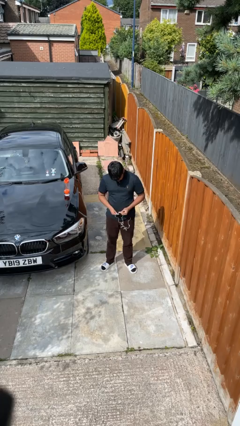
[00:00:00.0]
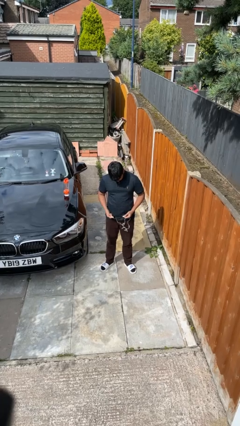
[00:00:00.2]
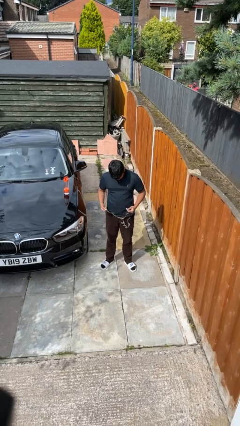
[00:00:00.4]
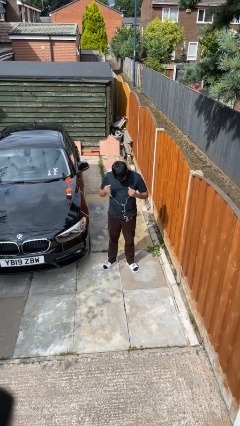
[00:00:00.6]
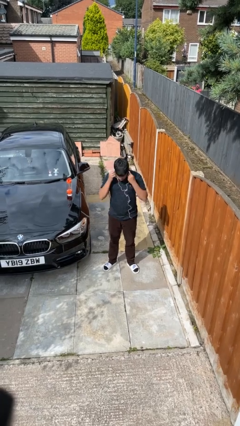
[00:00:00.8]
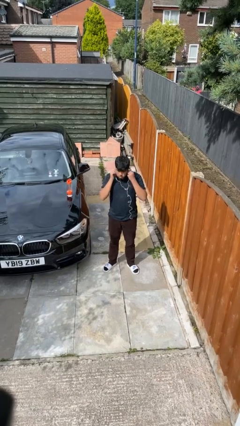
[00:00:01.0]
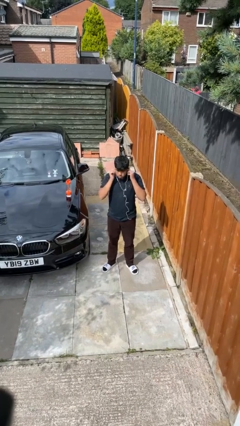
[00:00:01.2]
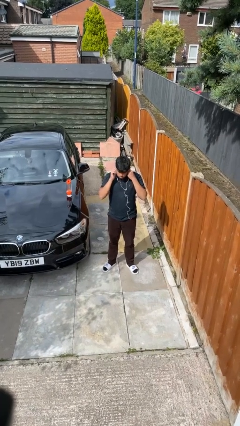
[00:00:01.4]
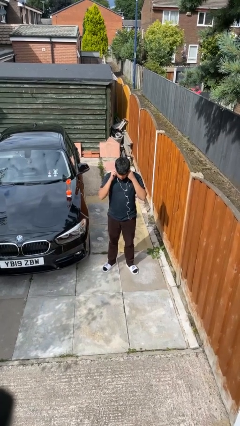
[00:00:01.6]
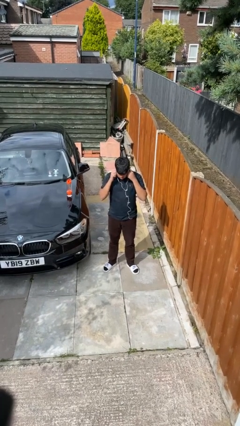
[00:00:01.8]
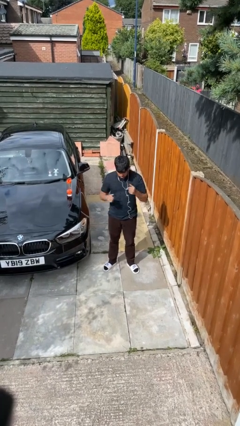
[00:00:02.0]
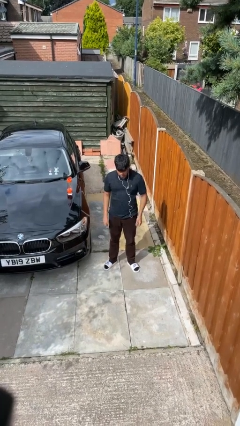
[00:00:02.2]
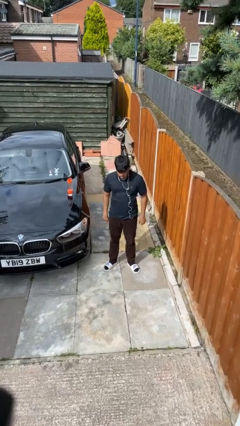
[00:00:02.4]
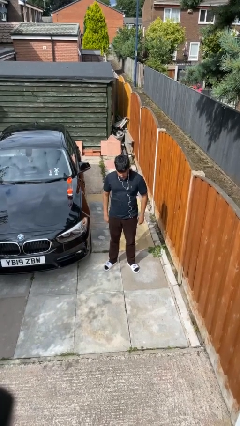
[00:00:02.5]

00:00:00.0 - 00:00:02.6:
person puts on headphones

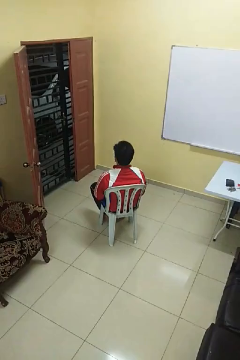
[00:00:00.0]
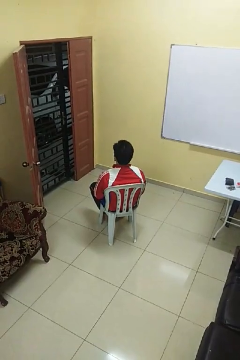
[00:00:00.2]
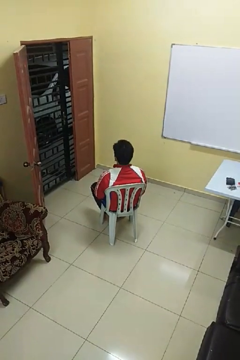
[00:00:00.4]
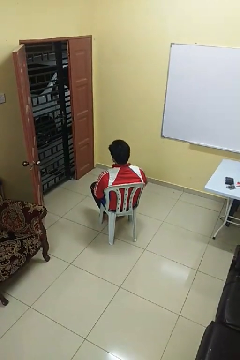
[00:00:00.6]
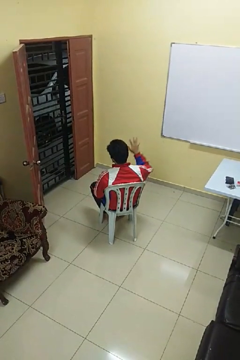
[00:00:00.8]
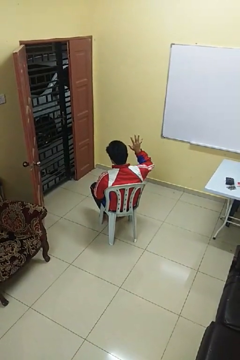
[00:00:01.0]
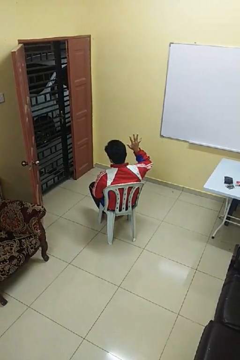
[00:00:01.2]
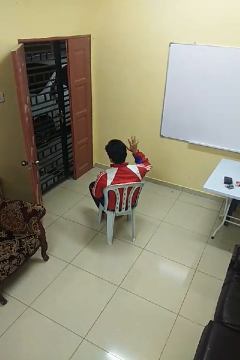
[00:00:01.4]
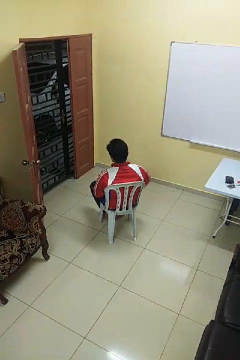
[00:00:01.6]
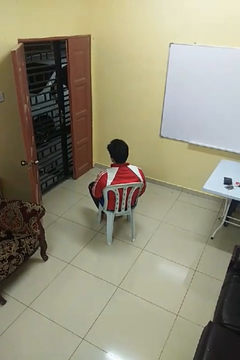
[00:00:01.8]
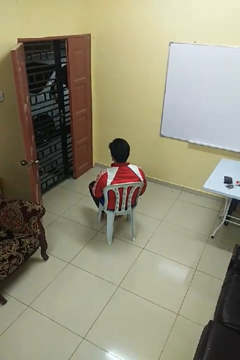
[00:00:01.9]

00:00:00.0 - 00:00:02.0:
person gestures number five

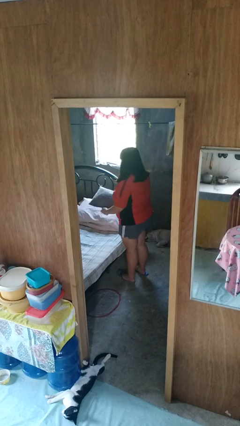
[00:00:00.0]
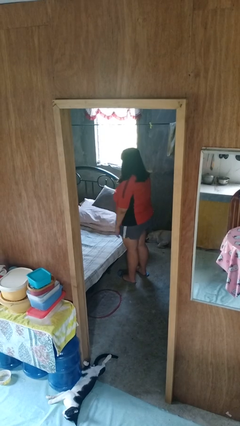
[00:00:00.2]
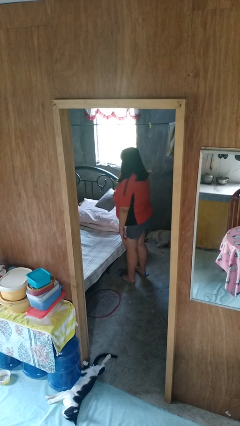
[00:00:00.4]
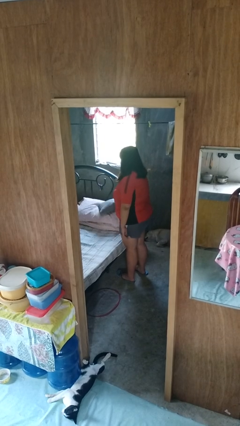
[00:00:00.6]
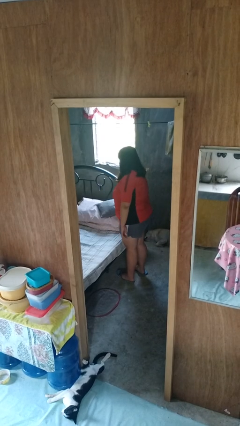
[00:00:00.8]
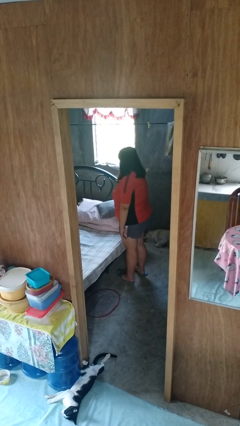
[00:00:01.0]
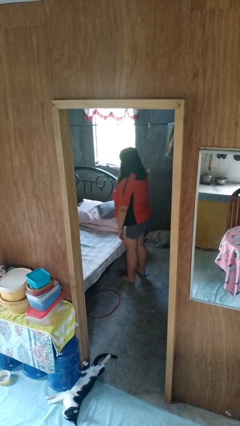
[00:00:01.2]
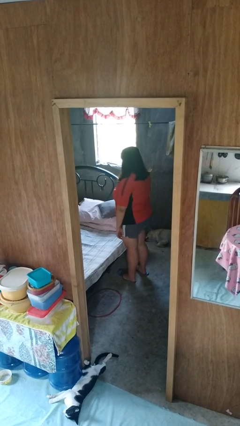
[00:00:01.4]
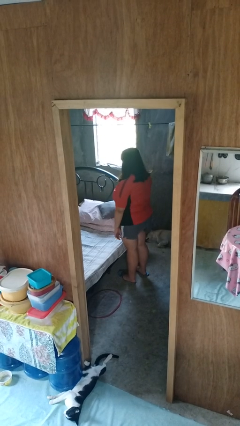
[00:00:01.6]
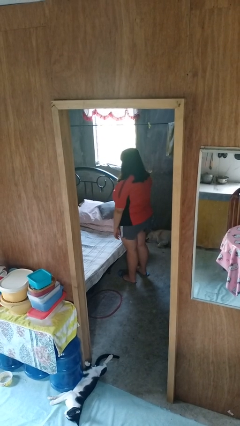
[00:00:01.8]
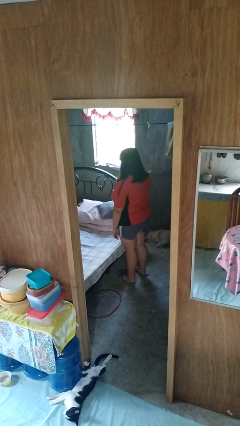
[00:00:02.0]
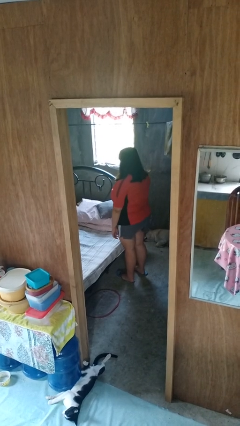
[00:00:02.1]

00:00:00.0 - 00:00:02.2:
person puts down object on bed

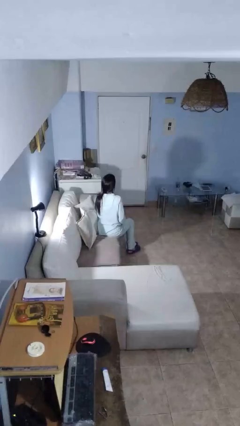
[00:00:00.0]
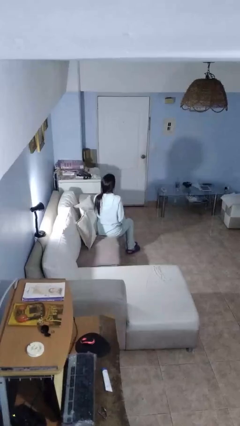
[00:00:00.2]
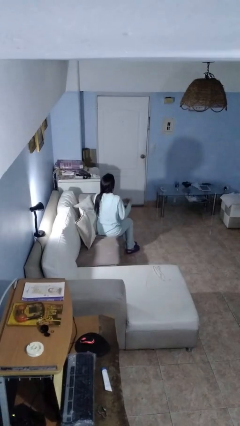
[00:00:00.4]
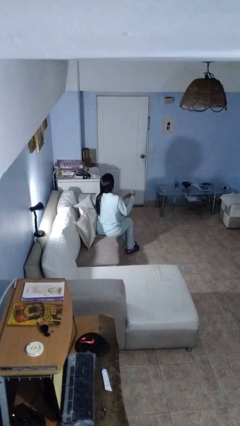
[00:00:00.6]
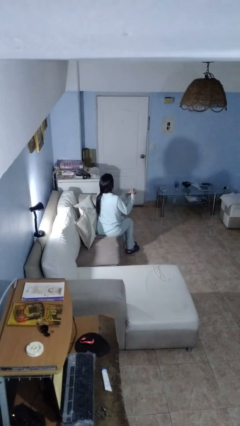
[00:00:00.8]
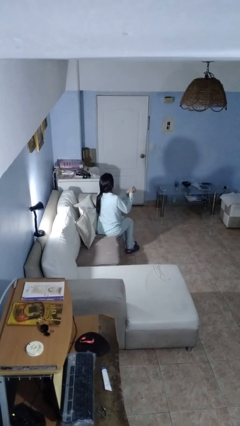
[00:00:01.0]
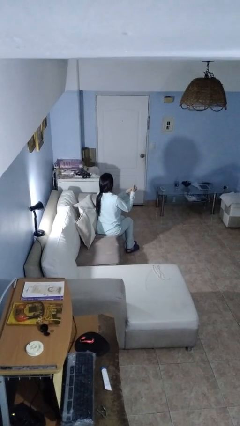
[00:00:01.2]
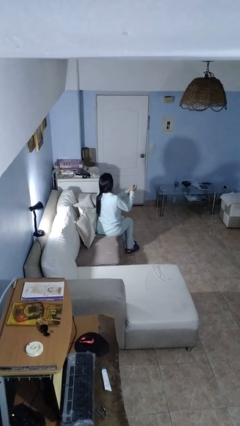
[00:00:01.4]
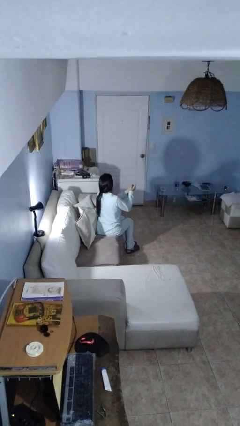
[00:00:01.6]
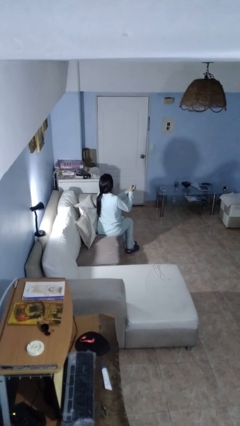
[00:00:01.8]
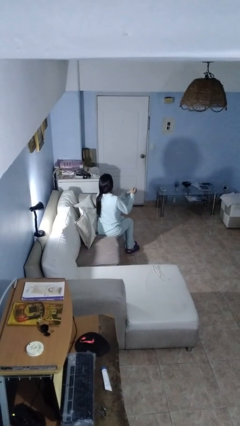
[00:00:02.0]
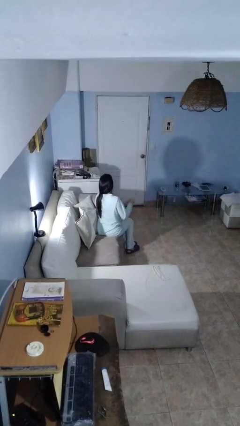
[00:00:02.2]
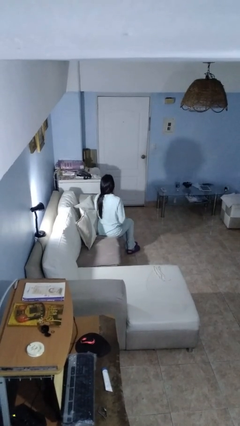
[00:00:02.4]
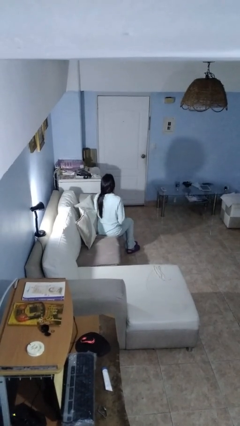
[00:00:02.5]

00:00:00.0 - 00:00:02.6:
person snaps fingers

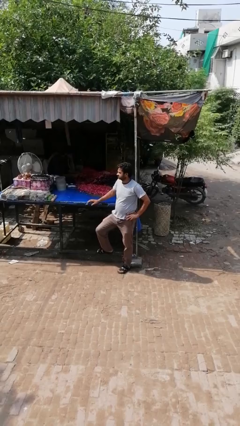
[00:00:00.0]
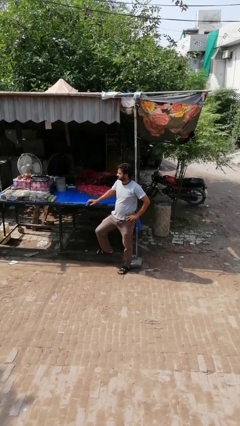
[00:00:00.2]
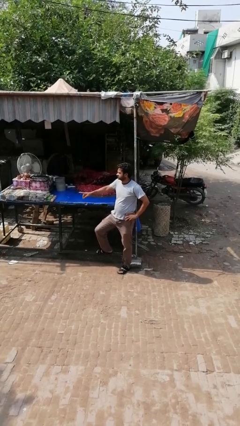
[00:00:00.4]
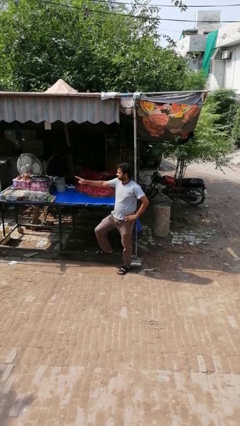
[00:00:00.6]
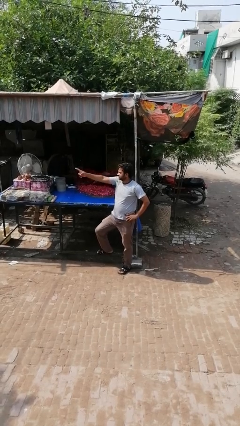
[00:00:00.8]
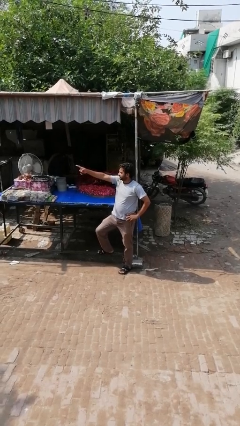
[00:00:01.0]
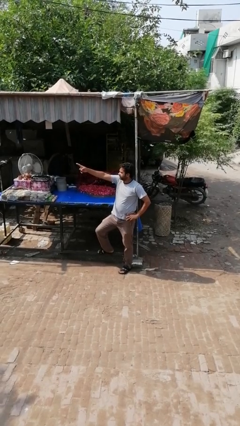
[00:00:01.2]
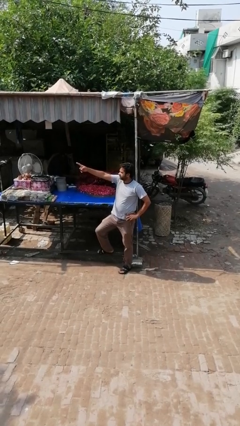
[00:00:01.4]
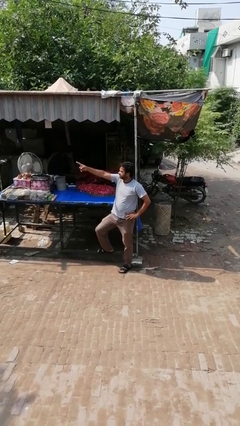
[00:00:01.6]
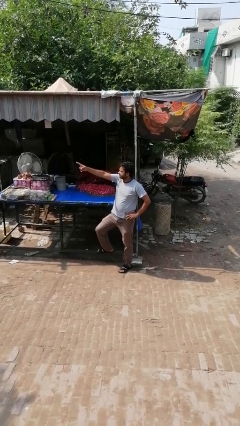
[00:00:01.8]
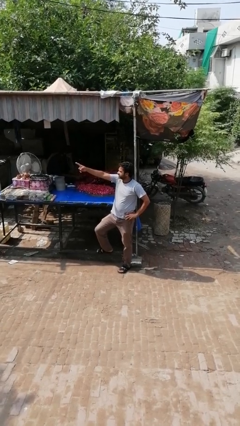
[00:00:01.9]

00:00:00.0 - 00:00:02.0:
person points at person

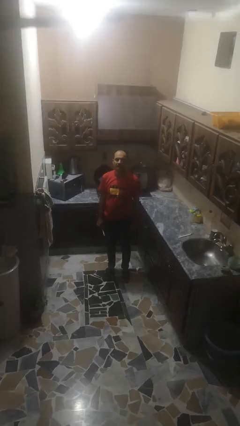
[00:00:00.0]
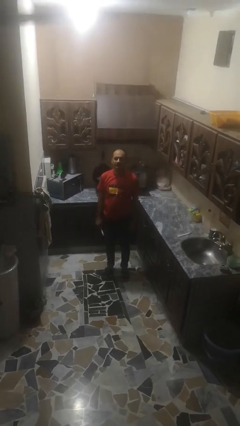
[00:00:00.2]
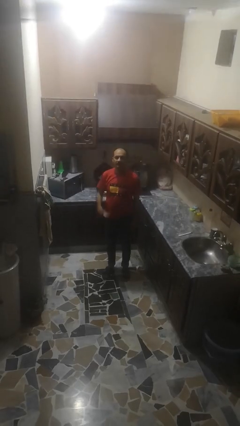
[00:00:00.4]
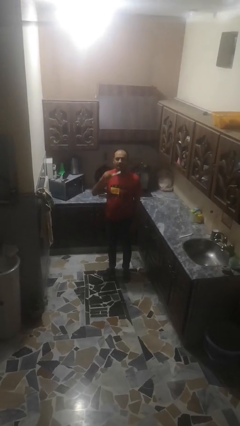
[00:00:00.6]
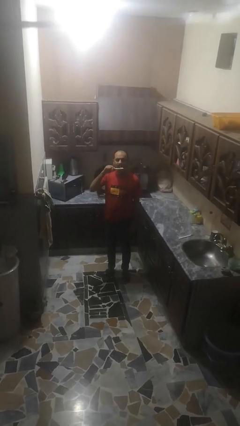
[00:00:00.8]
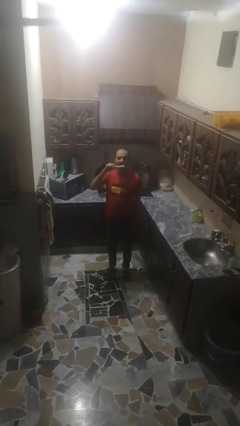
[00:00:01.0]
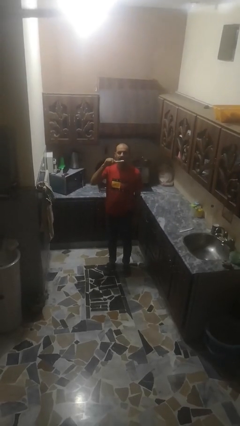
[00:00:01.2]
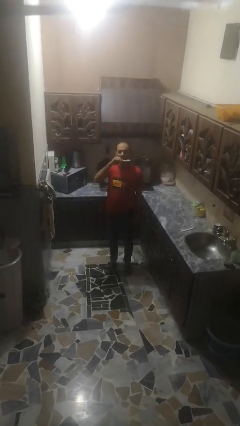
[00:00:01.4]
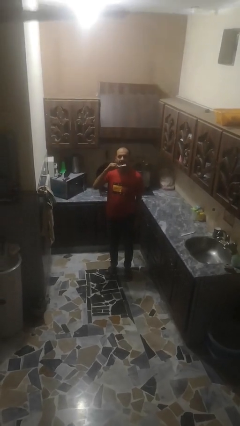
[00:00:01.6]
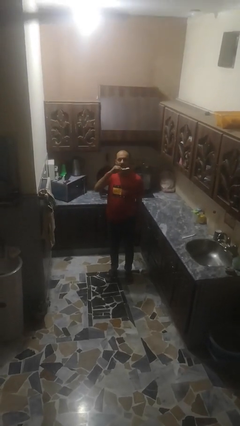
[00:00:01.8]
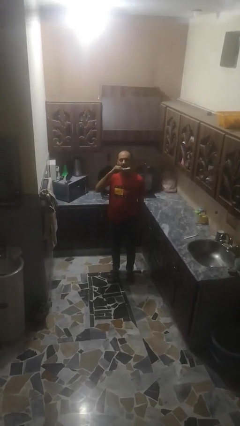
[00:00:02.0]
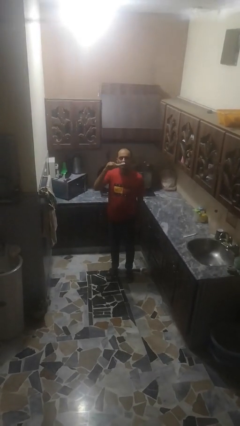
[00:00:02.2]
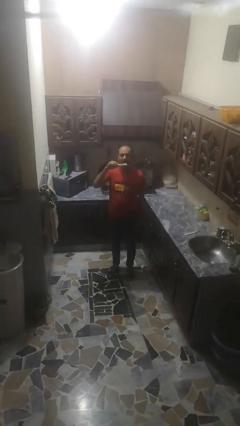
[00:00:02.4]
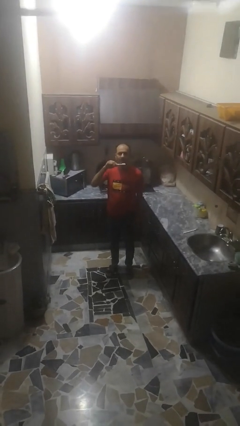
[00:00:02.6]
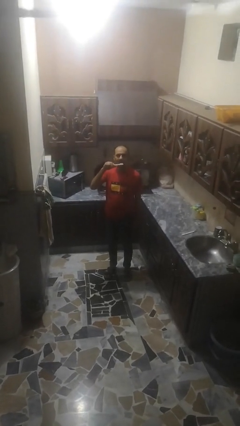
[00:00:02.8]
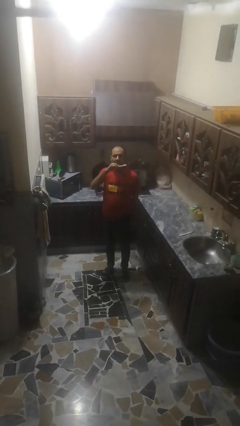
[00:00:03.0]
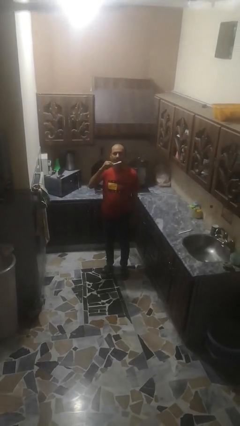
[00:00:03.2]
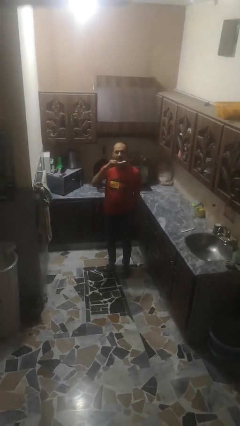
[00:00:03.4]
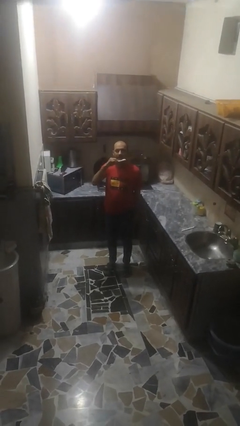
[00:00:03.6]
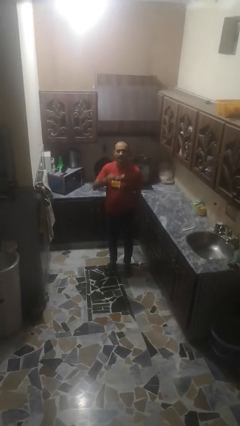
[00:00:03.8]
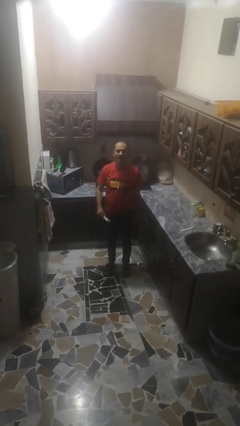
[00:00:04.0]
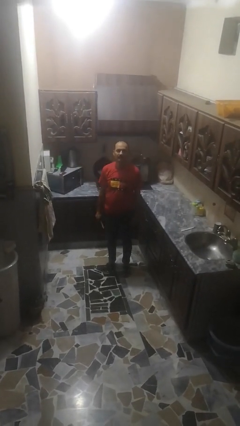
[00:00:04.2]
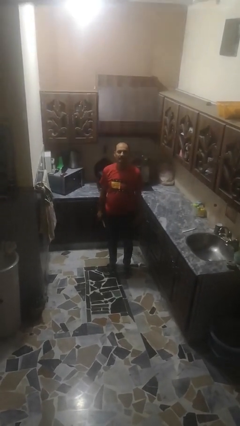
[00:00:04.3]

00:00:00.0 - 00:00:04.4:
person brushes teeth

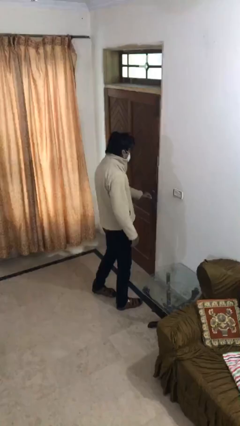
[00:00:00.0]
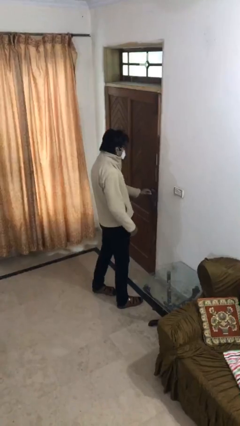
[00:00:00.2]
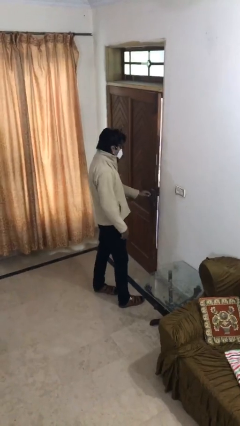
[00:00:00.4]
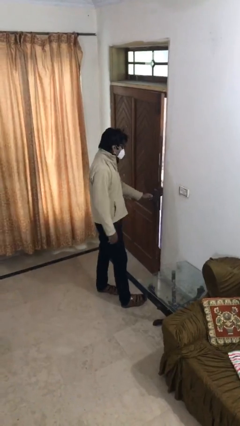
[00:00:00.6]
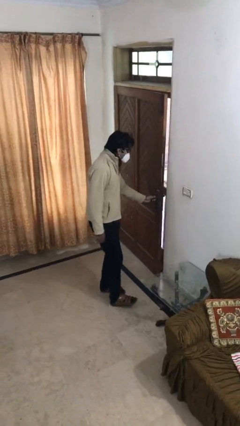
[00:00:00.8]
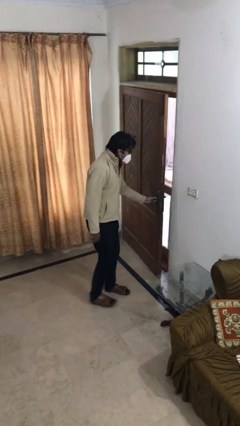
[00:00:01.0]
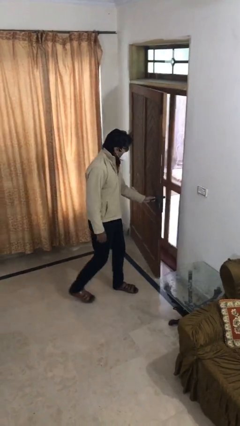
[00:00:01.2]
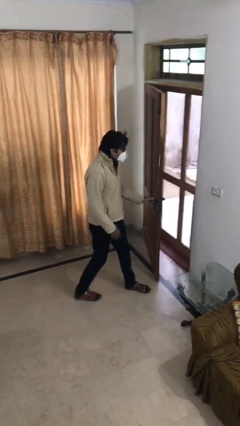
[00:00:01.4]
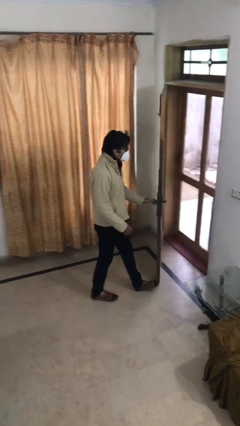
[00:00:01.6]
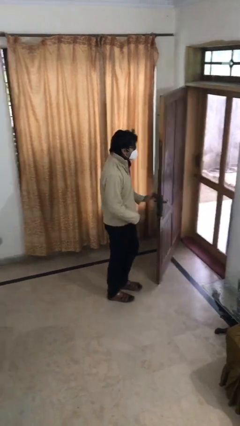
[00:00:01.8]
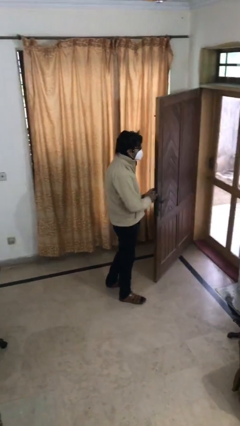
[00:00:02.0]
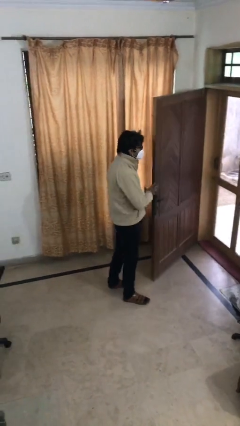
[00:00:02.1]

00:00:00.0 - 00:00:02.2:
person opens facility door
